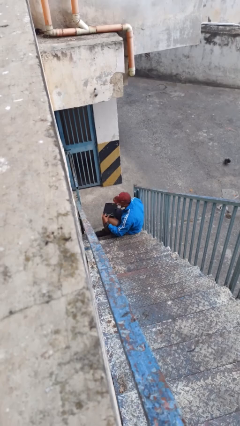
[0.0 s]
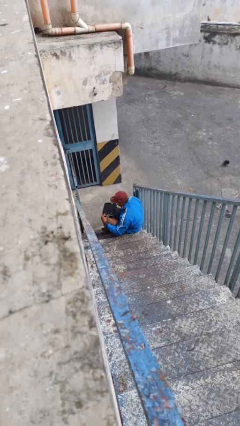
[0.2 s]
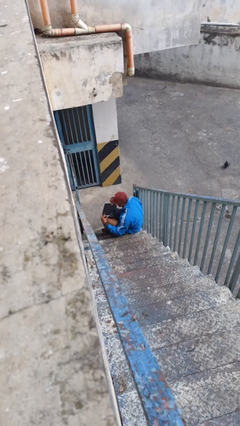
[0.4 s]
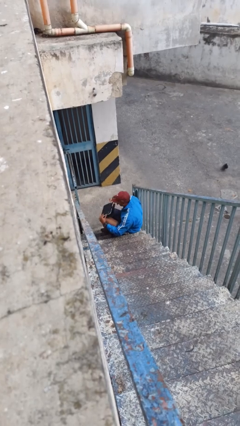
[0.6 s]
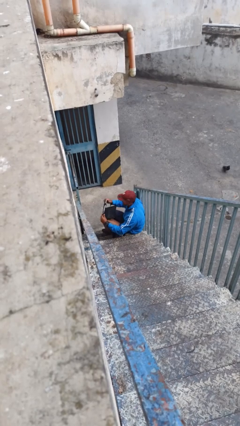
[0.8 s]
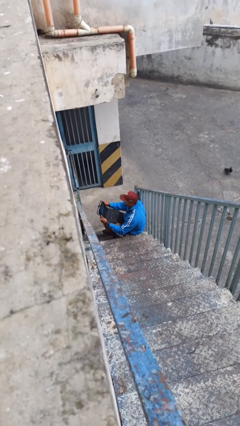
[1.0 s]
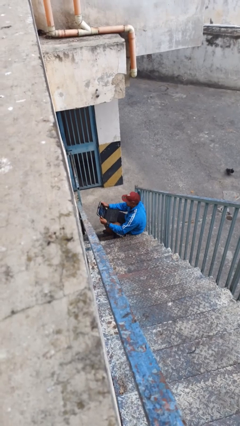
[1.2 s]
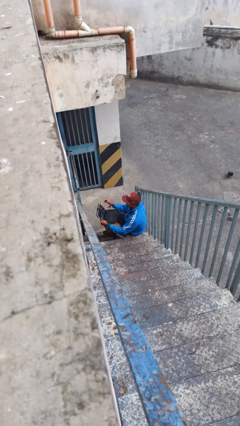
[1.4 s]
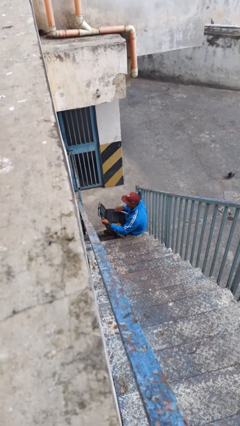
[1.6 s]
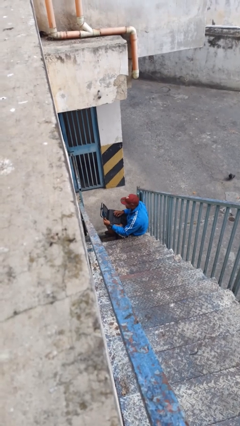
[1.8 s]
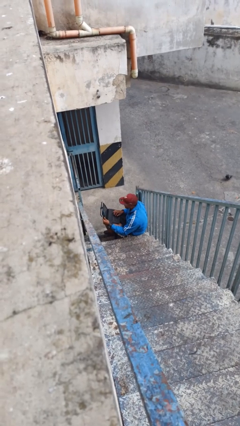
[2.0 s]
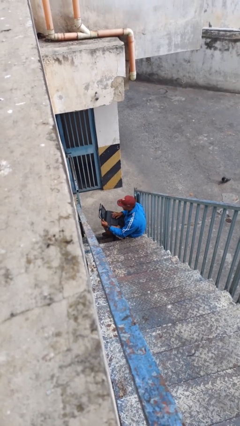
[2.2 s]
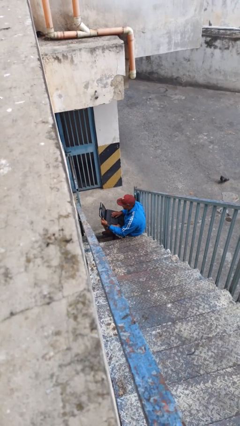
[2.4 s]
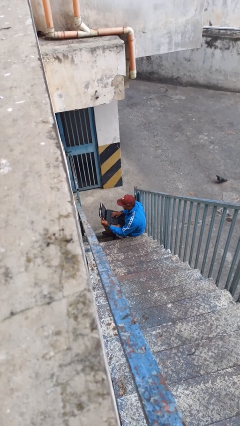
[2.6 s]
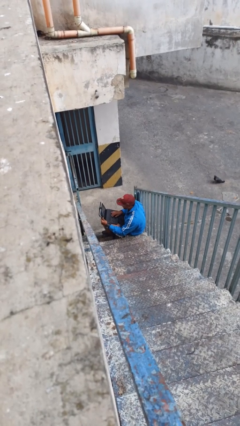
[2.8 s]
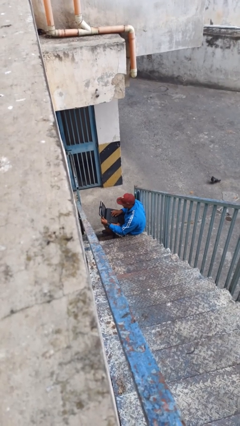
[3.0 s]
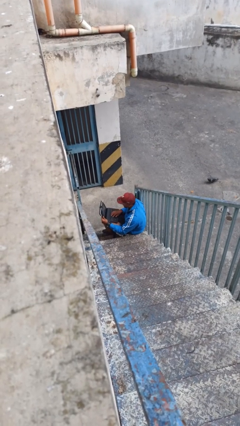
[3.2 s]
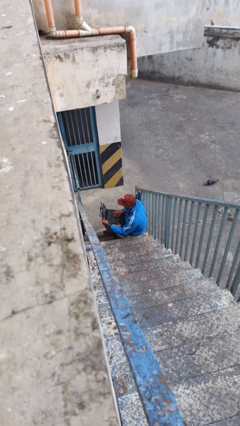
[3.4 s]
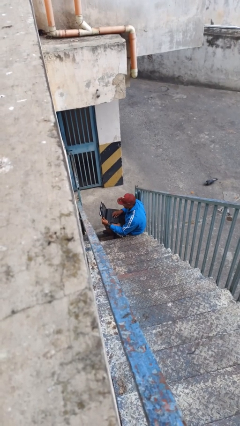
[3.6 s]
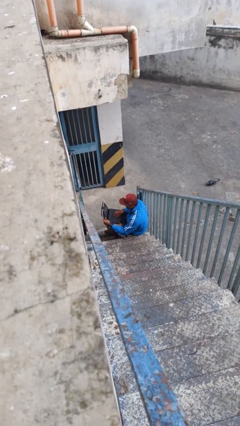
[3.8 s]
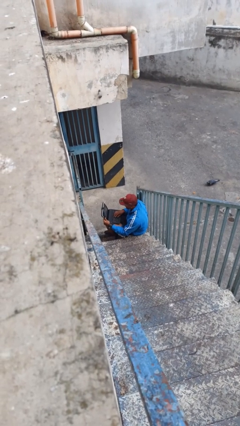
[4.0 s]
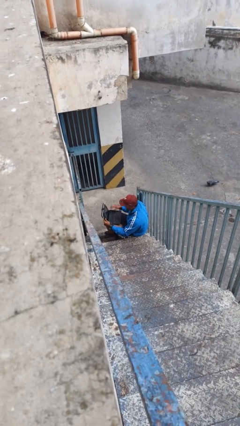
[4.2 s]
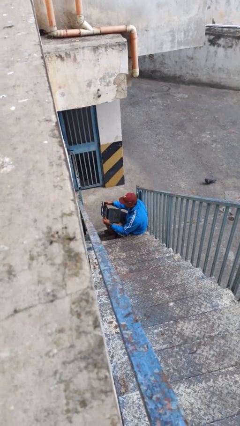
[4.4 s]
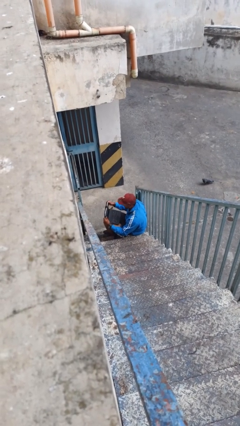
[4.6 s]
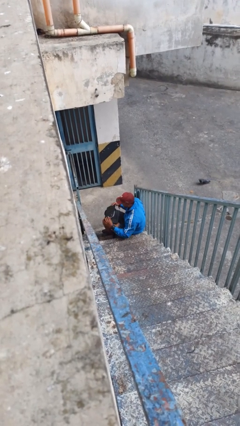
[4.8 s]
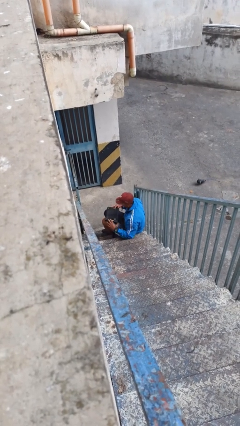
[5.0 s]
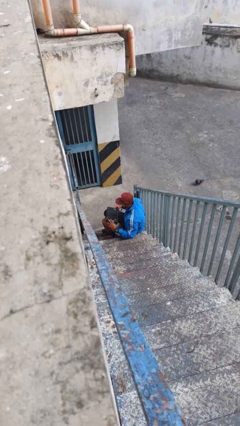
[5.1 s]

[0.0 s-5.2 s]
person interacts with laptop

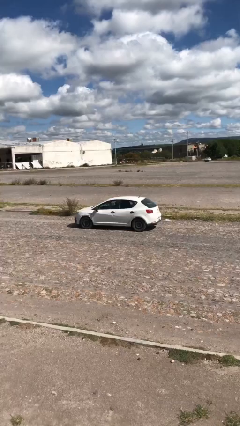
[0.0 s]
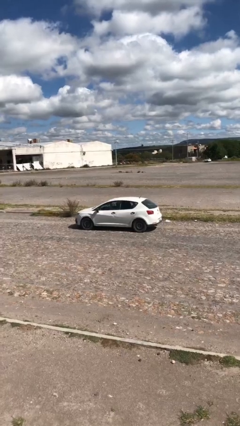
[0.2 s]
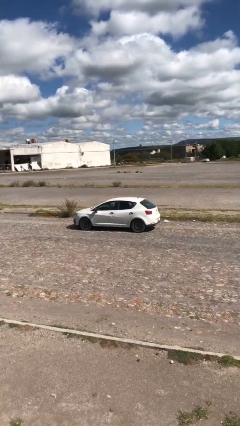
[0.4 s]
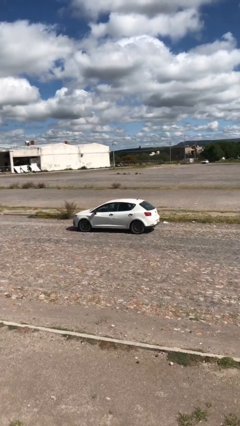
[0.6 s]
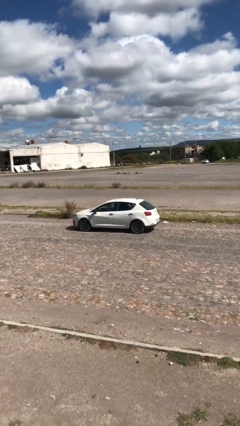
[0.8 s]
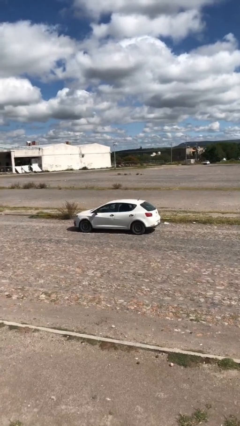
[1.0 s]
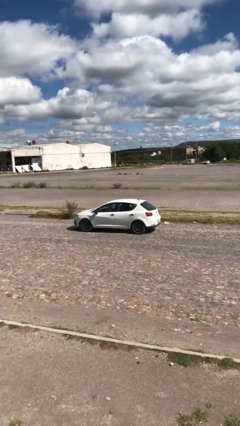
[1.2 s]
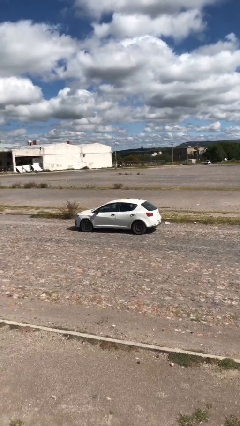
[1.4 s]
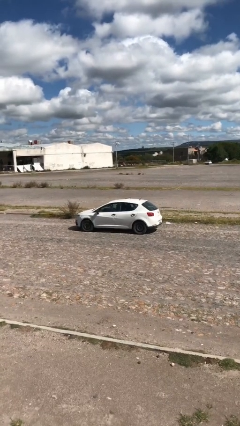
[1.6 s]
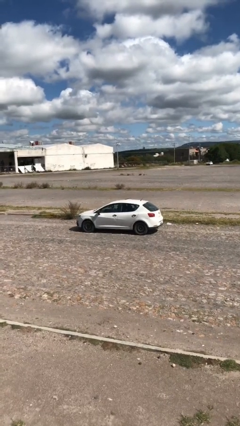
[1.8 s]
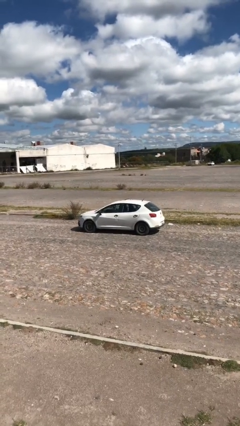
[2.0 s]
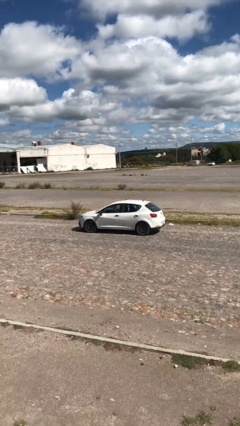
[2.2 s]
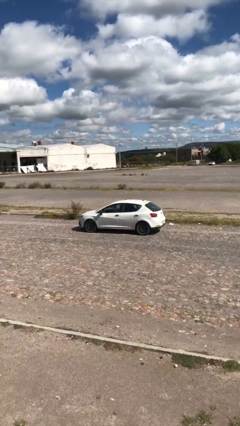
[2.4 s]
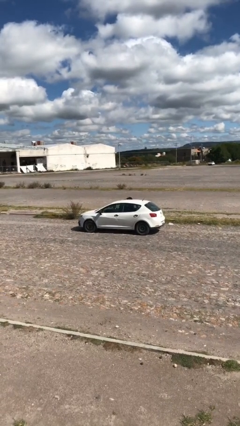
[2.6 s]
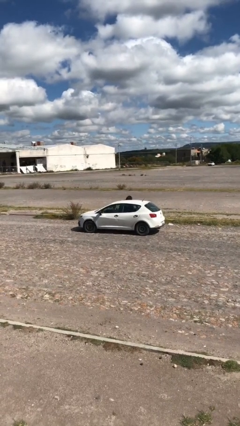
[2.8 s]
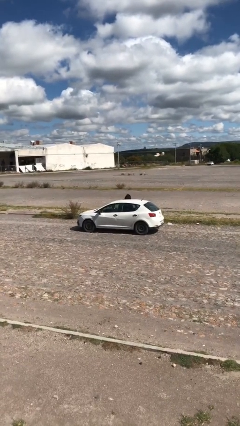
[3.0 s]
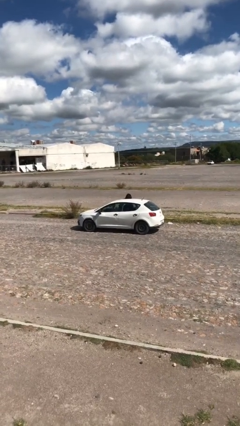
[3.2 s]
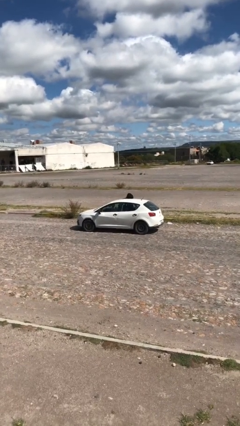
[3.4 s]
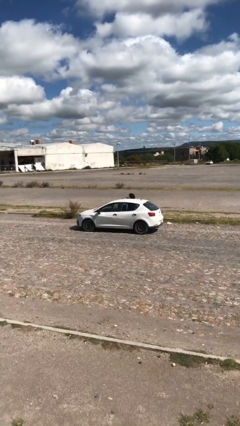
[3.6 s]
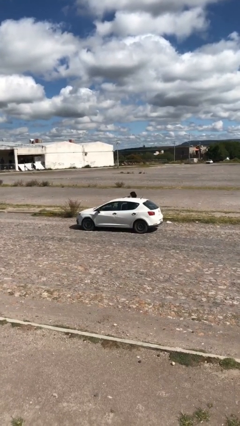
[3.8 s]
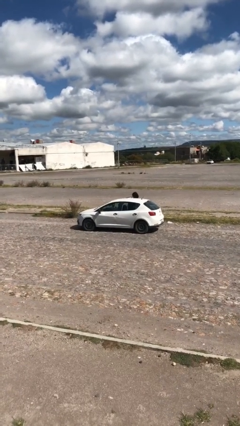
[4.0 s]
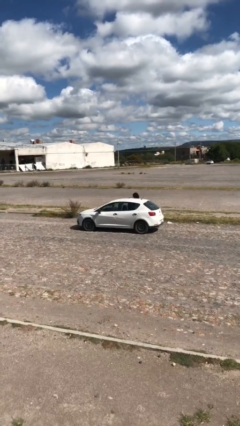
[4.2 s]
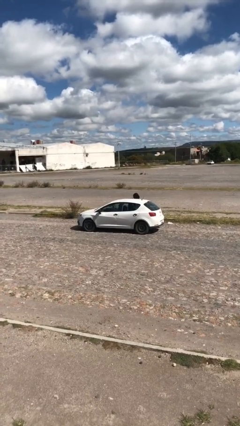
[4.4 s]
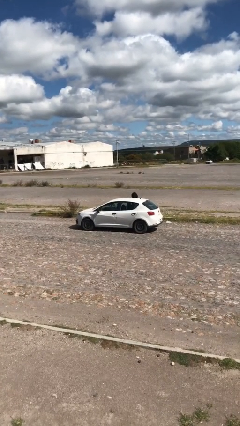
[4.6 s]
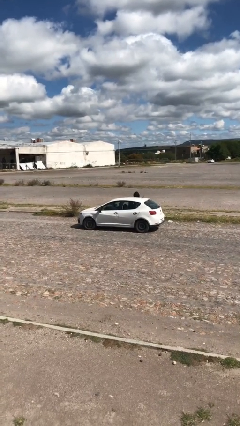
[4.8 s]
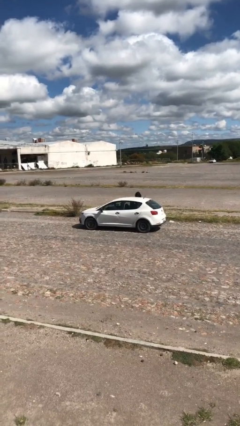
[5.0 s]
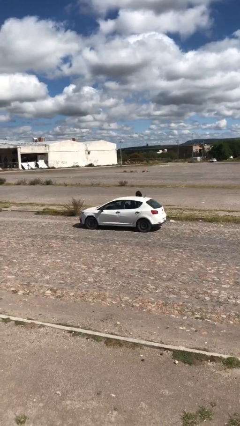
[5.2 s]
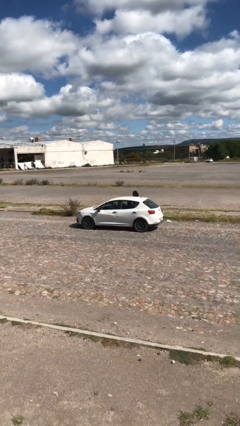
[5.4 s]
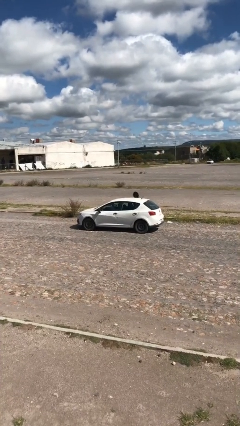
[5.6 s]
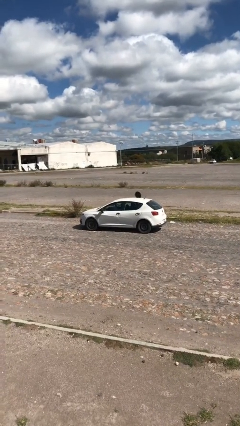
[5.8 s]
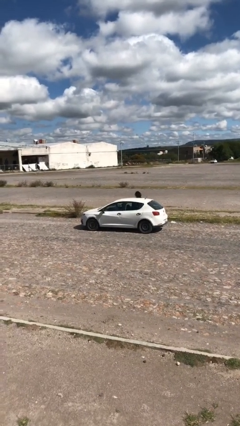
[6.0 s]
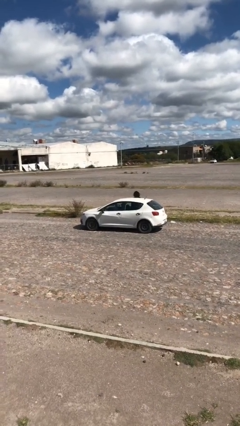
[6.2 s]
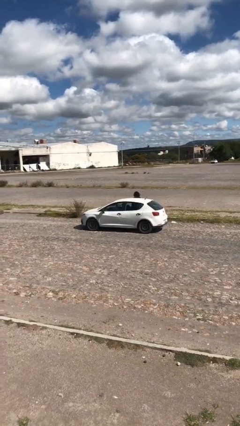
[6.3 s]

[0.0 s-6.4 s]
car drops off person

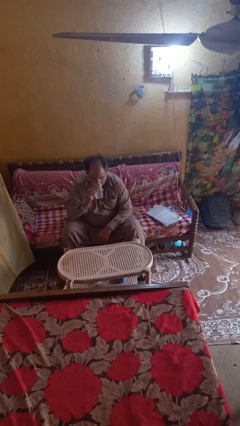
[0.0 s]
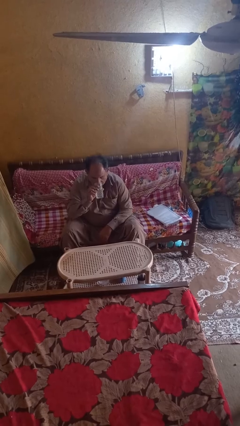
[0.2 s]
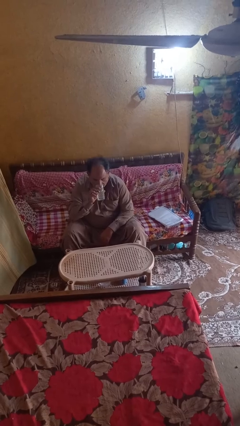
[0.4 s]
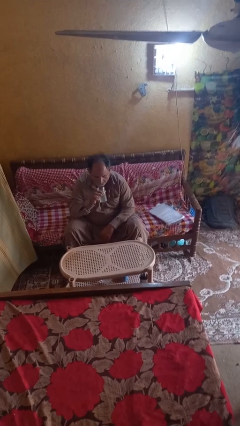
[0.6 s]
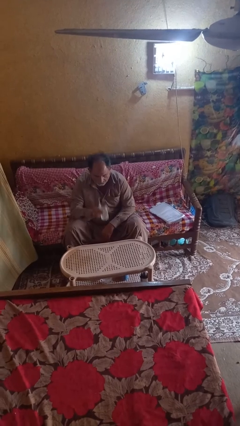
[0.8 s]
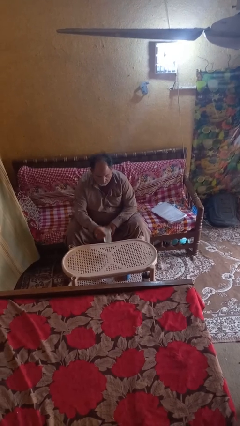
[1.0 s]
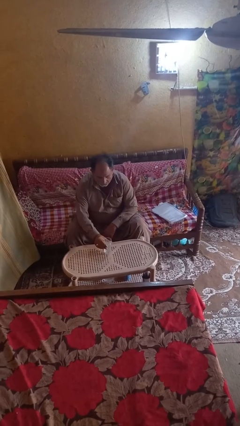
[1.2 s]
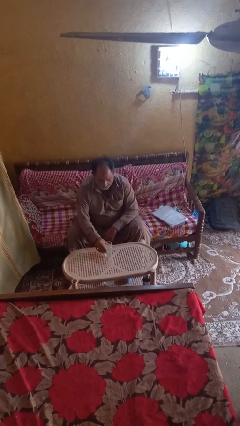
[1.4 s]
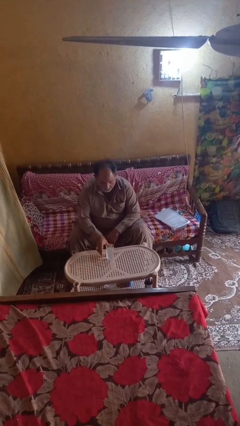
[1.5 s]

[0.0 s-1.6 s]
person puts down object on table

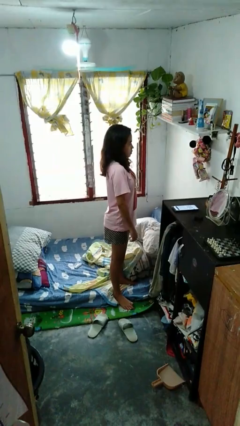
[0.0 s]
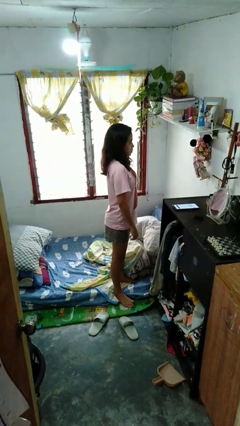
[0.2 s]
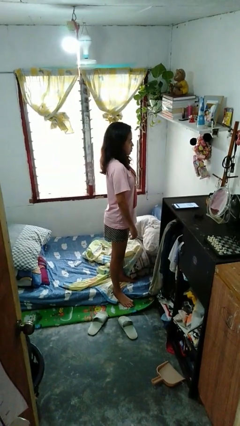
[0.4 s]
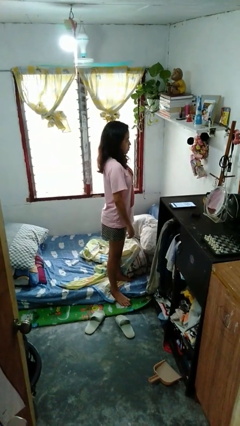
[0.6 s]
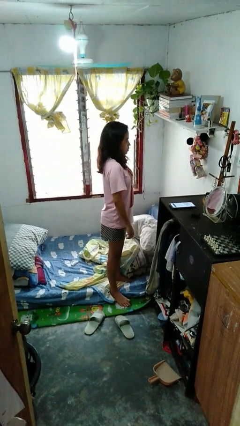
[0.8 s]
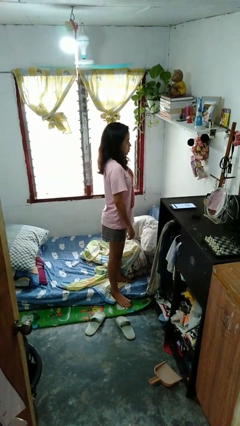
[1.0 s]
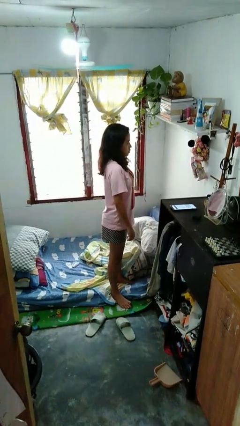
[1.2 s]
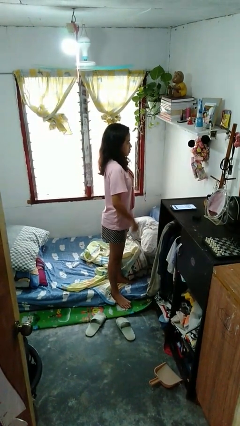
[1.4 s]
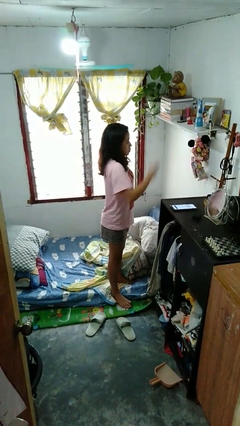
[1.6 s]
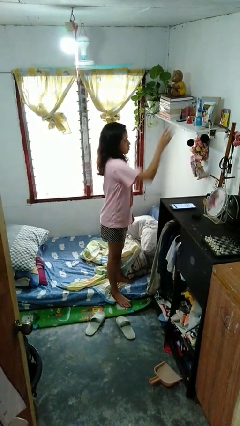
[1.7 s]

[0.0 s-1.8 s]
person applies foundation makeup

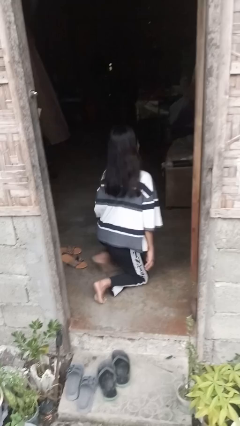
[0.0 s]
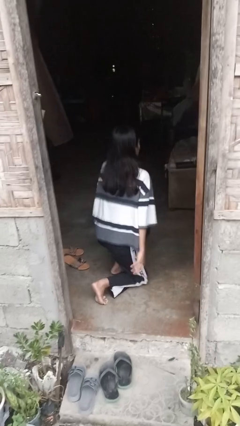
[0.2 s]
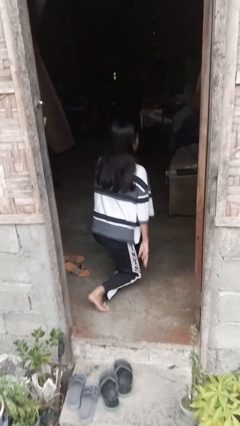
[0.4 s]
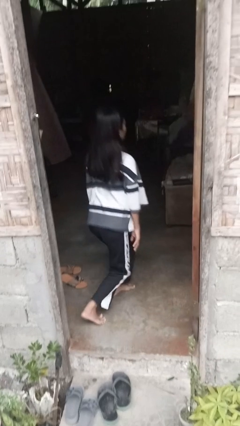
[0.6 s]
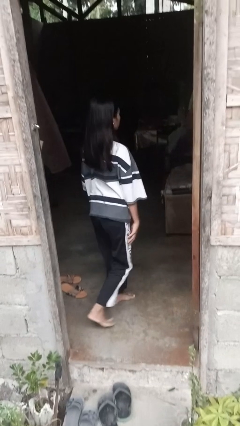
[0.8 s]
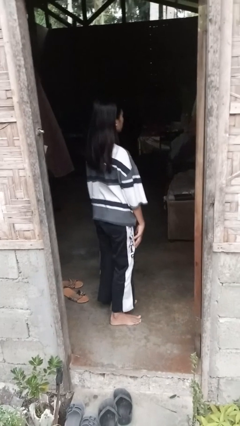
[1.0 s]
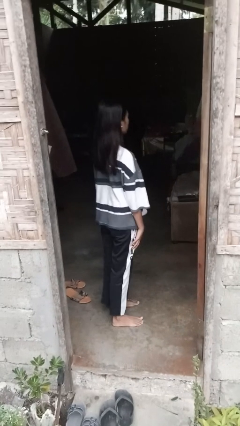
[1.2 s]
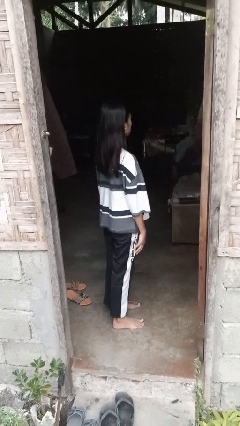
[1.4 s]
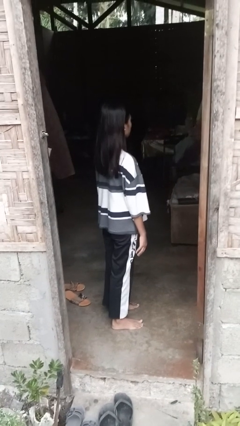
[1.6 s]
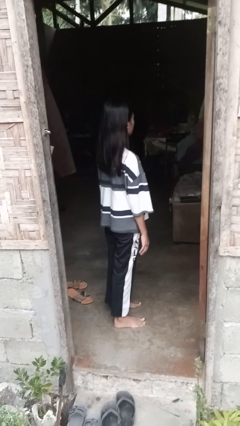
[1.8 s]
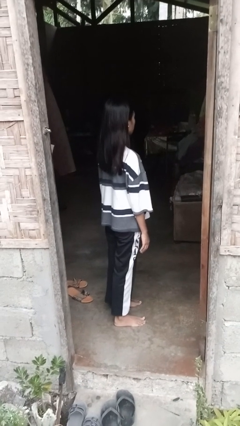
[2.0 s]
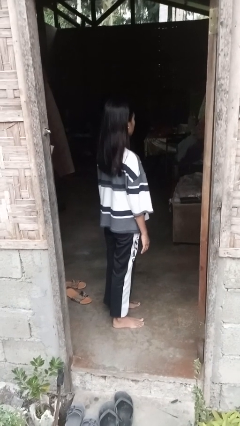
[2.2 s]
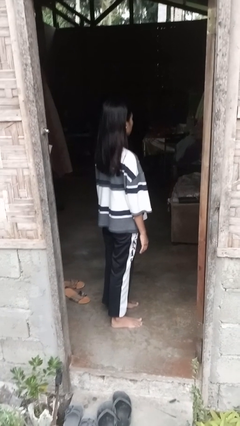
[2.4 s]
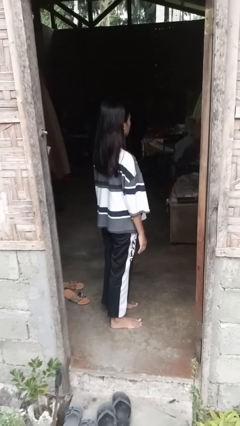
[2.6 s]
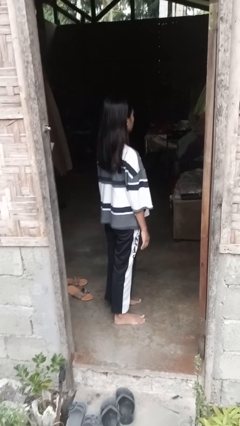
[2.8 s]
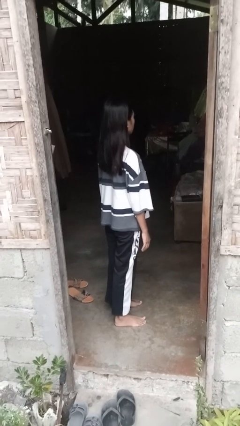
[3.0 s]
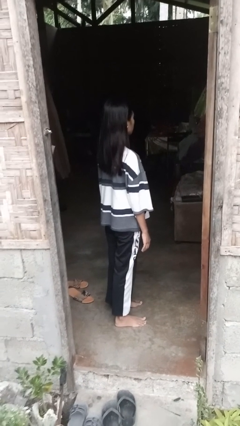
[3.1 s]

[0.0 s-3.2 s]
person stands up from floor
